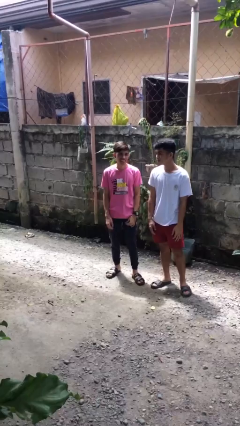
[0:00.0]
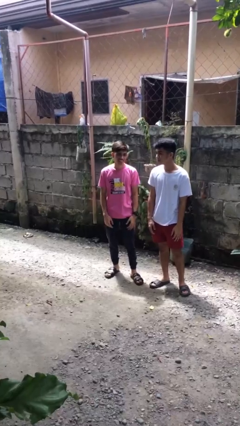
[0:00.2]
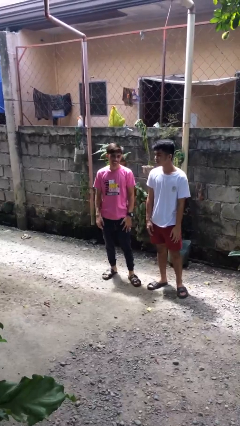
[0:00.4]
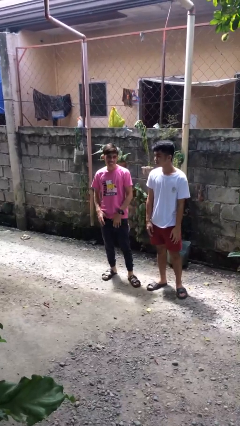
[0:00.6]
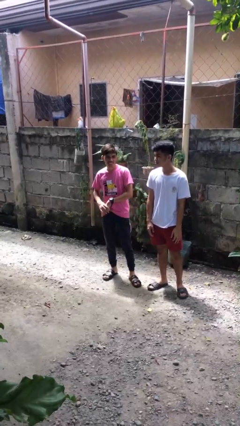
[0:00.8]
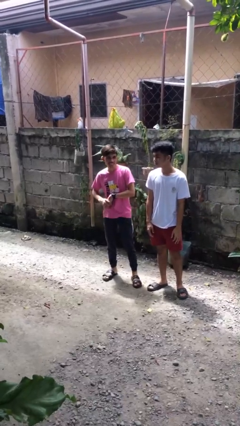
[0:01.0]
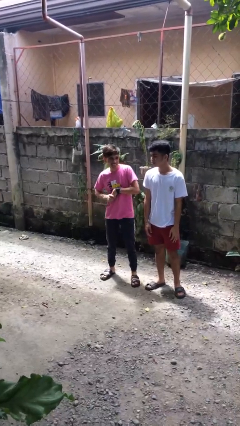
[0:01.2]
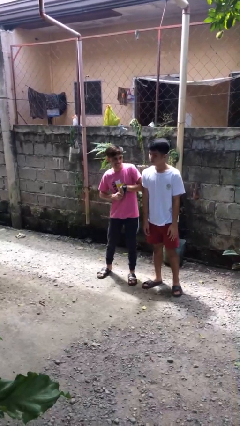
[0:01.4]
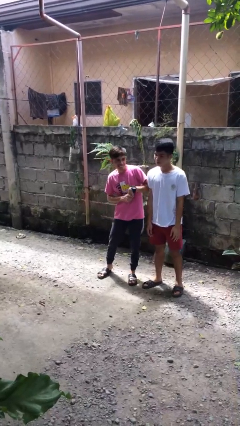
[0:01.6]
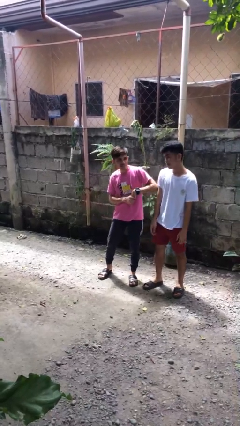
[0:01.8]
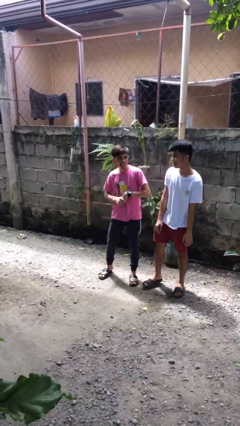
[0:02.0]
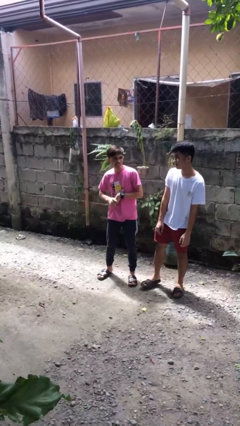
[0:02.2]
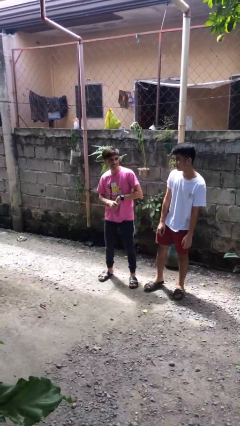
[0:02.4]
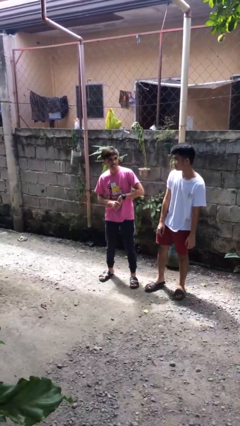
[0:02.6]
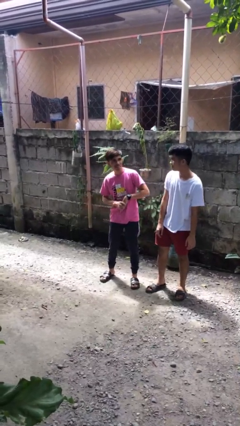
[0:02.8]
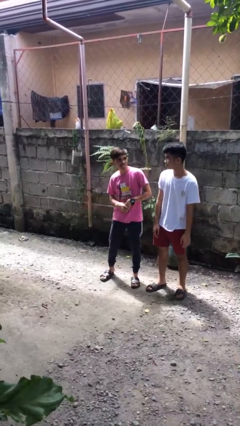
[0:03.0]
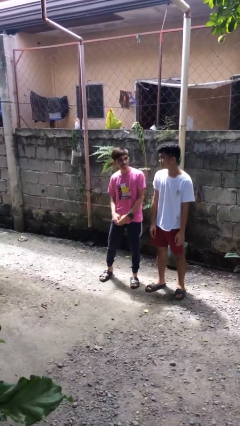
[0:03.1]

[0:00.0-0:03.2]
person nudges person with elbow

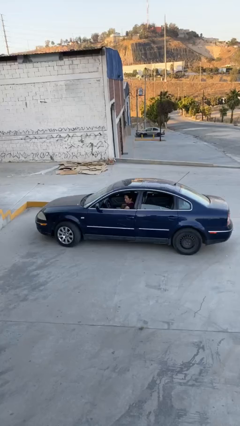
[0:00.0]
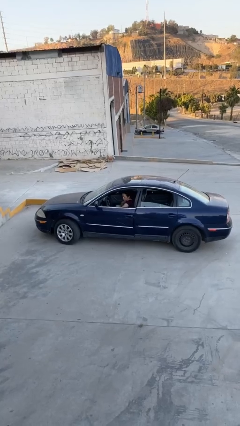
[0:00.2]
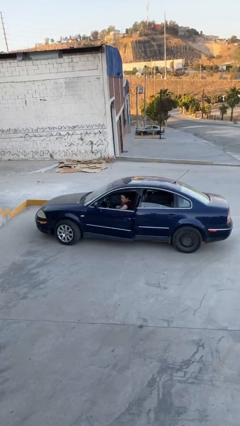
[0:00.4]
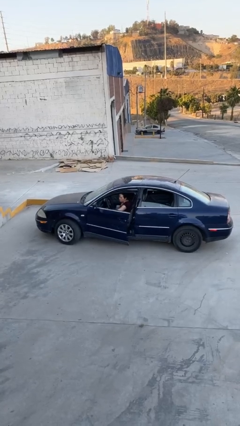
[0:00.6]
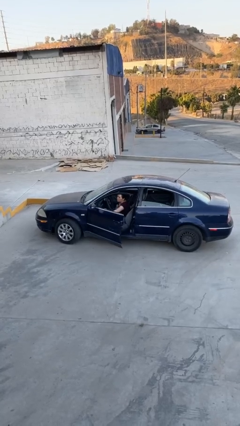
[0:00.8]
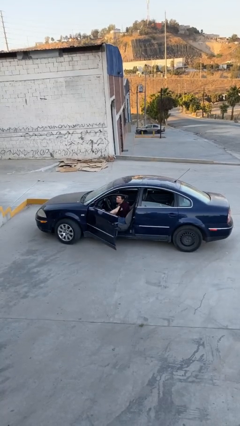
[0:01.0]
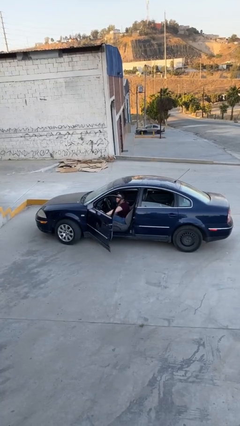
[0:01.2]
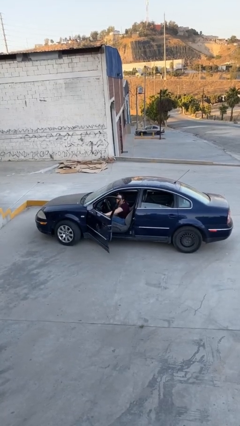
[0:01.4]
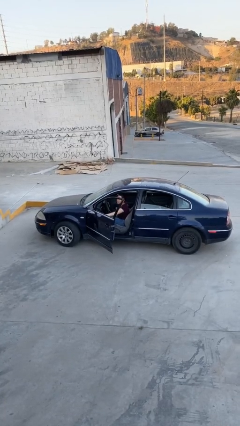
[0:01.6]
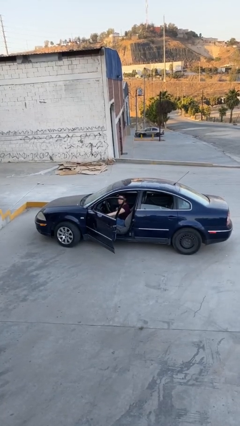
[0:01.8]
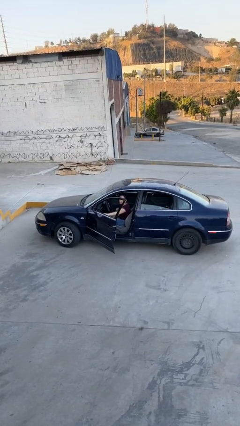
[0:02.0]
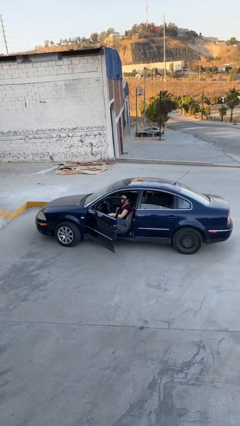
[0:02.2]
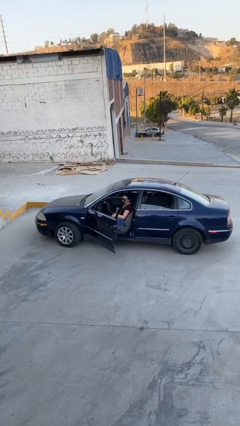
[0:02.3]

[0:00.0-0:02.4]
person opens car door

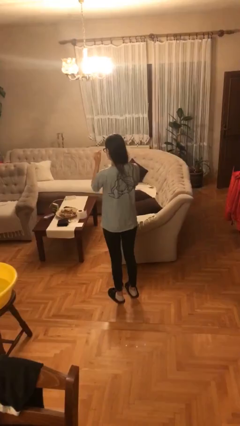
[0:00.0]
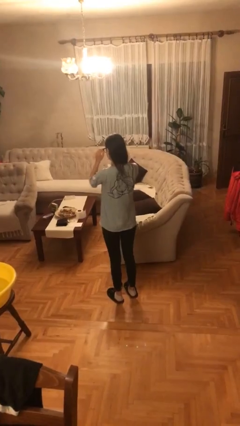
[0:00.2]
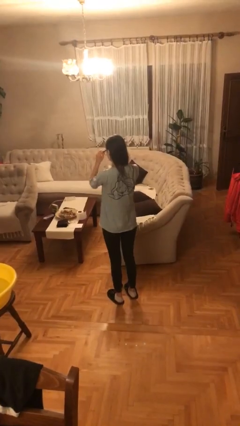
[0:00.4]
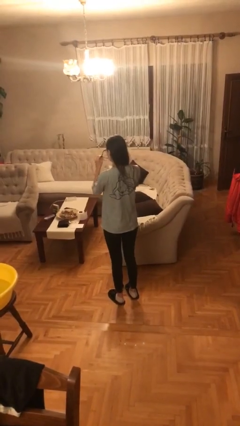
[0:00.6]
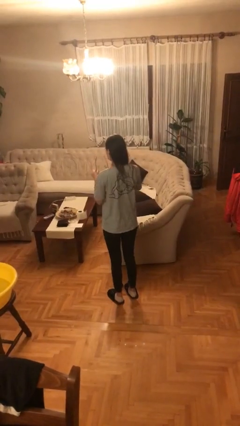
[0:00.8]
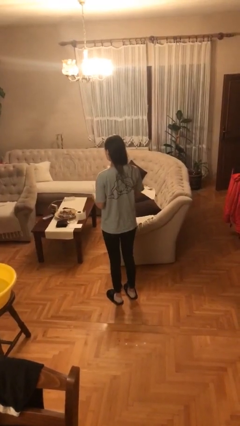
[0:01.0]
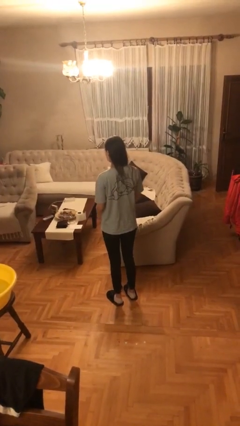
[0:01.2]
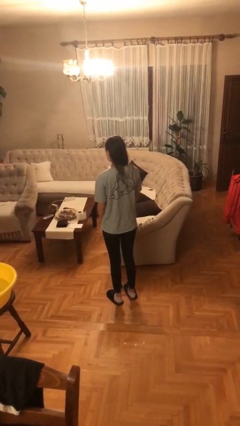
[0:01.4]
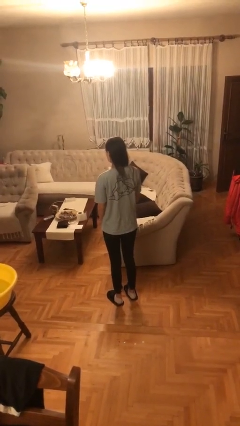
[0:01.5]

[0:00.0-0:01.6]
person takes off glasses

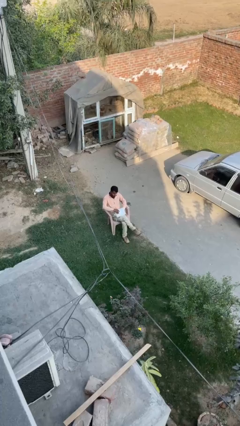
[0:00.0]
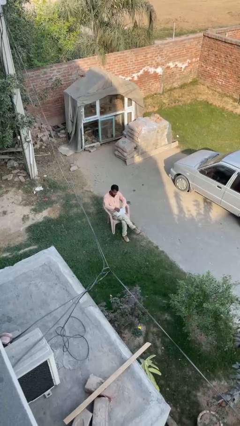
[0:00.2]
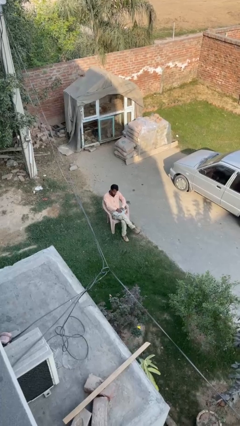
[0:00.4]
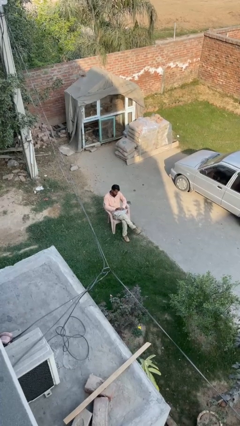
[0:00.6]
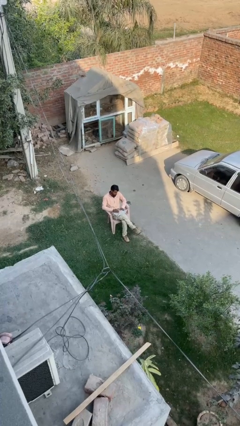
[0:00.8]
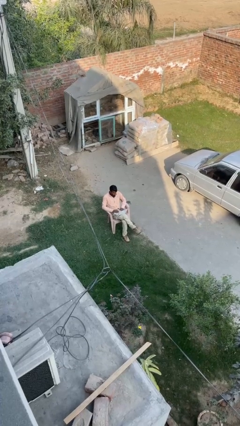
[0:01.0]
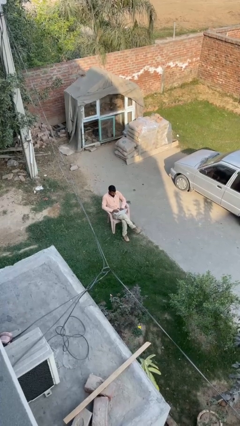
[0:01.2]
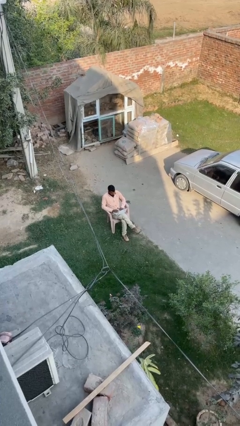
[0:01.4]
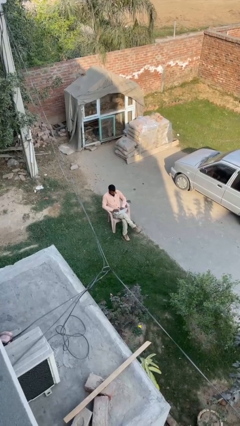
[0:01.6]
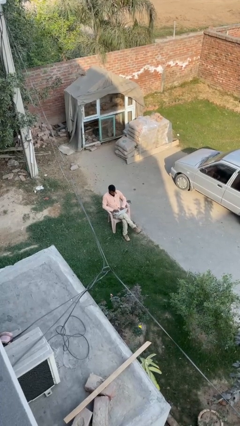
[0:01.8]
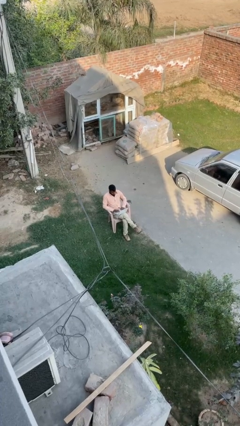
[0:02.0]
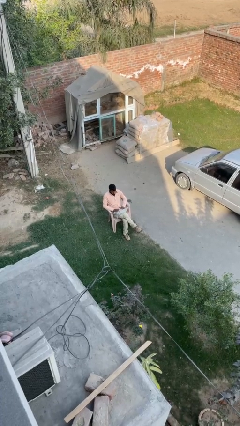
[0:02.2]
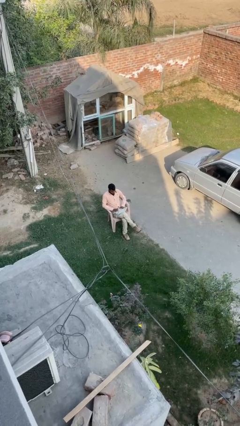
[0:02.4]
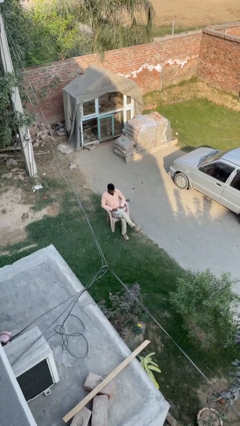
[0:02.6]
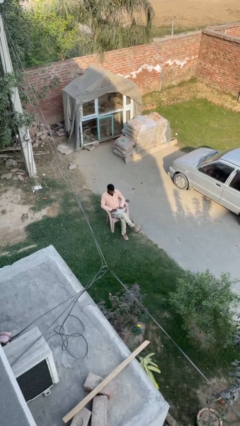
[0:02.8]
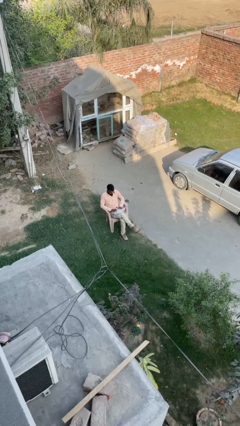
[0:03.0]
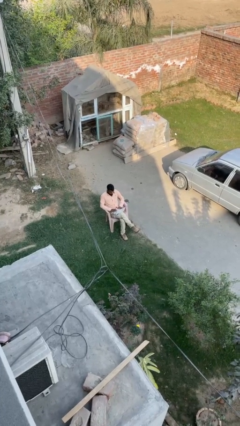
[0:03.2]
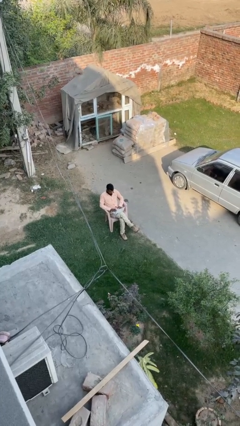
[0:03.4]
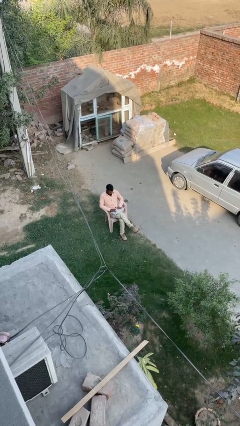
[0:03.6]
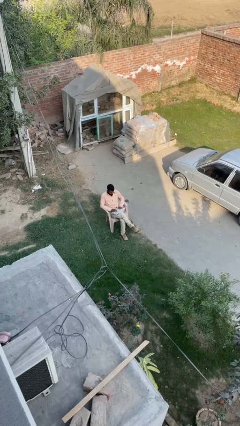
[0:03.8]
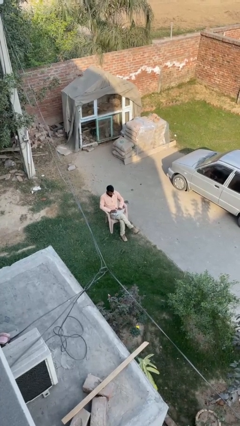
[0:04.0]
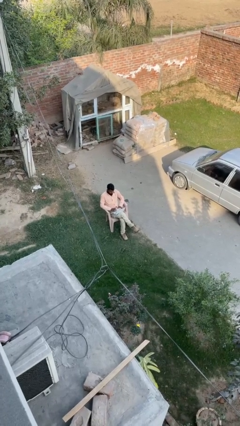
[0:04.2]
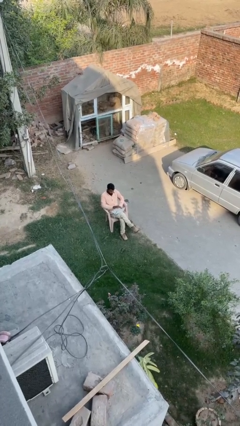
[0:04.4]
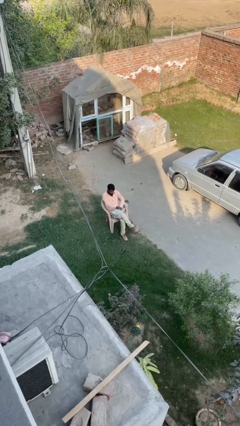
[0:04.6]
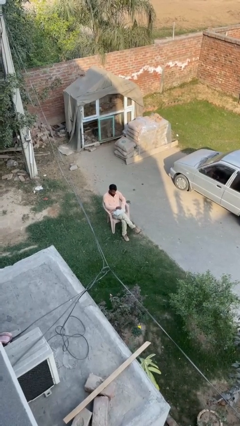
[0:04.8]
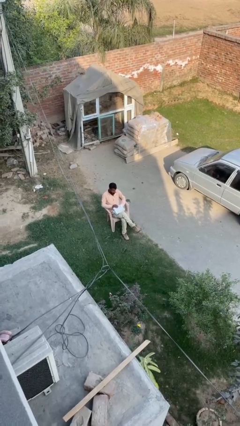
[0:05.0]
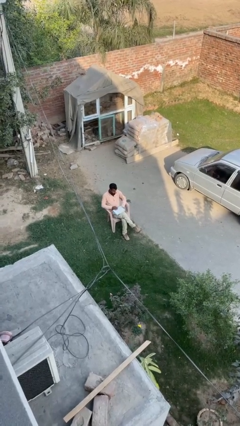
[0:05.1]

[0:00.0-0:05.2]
person interacts with laptop

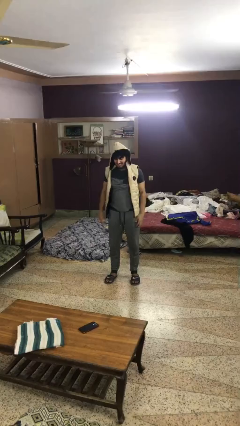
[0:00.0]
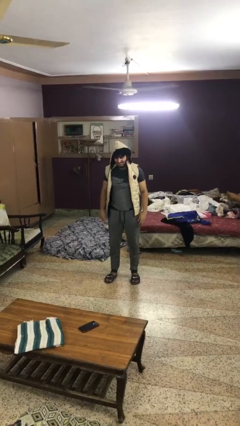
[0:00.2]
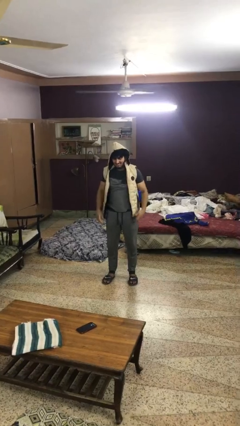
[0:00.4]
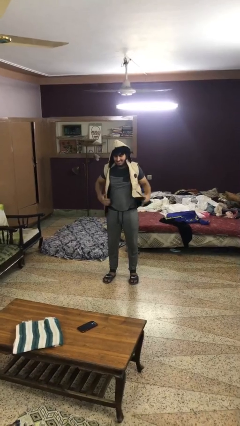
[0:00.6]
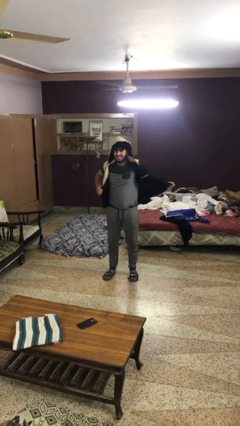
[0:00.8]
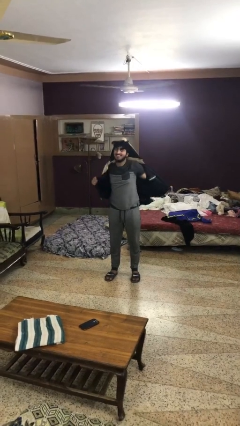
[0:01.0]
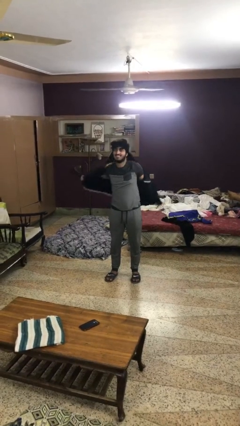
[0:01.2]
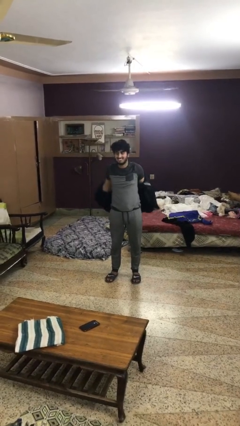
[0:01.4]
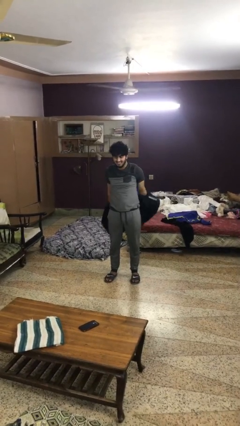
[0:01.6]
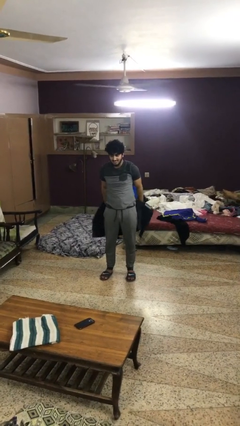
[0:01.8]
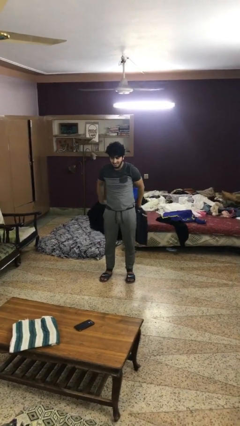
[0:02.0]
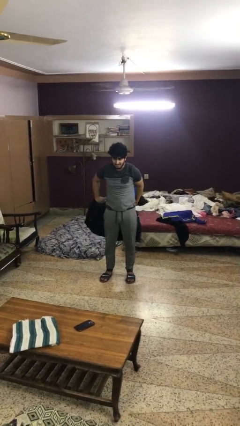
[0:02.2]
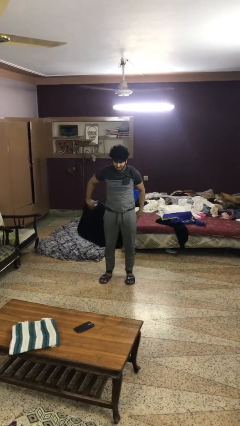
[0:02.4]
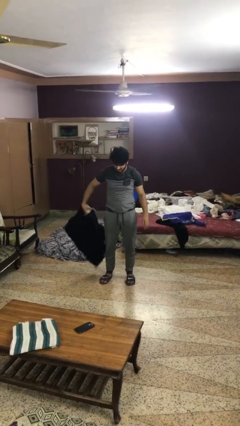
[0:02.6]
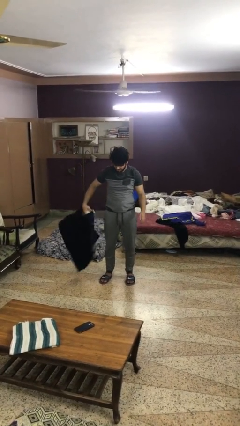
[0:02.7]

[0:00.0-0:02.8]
person takes off hoodie

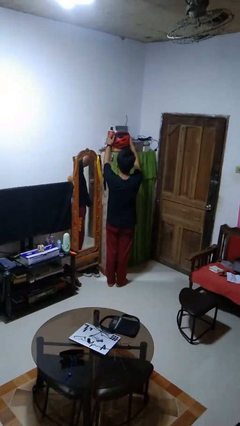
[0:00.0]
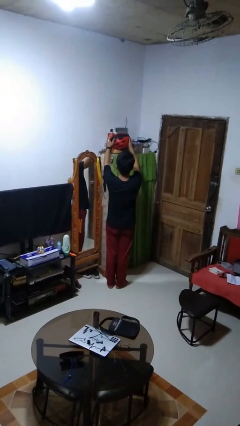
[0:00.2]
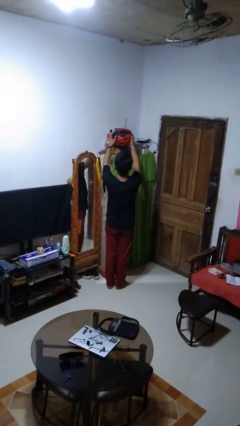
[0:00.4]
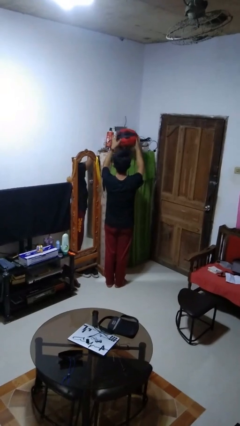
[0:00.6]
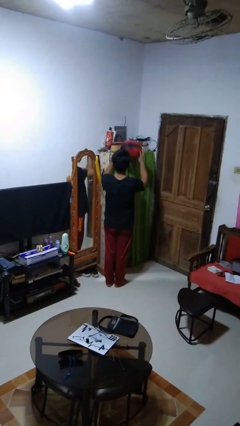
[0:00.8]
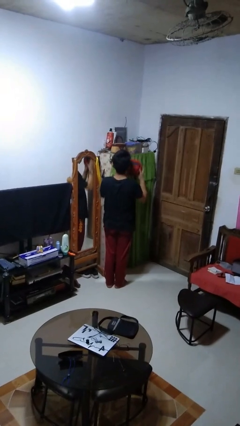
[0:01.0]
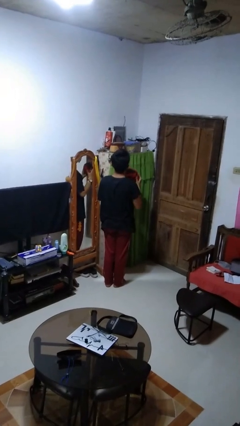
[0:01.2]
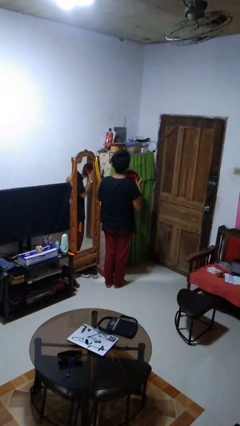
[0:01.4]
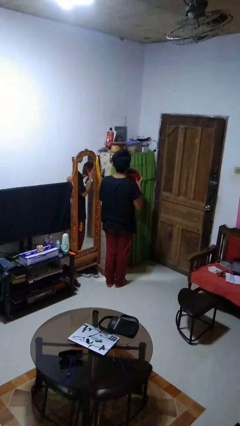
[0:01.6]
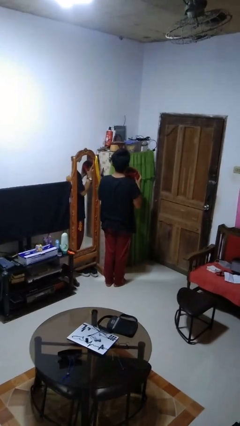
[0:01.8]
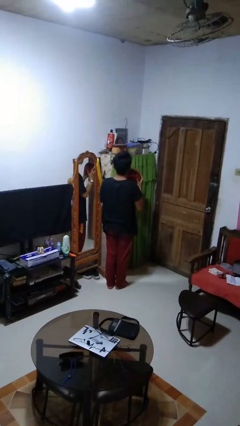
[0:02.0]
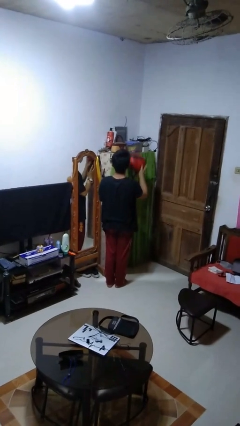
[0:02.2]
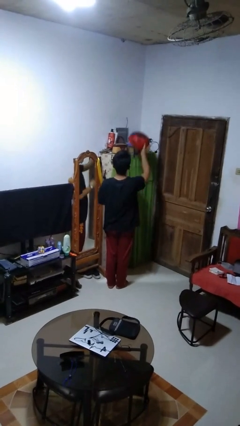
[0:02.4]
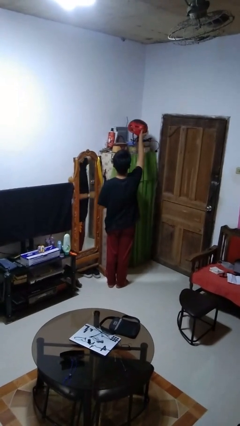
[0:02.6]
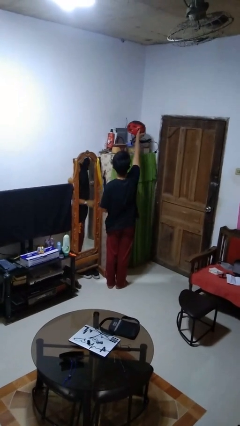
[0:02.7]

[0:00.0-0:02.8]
person picks up object from shelf
